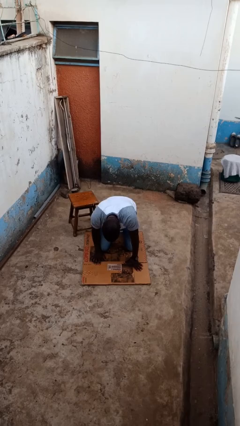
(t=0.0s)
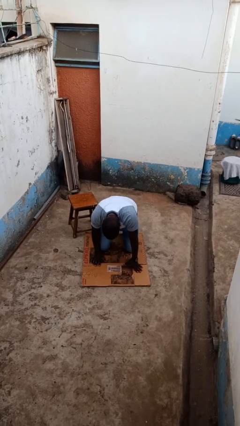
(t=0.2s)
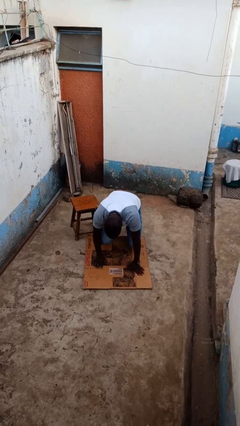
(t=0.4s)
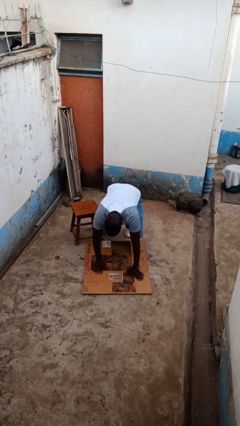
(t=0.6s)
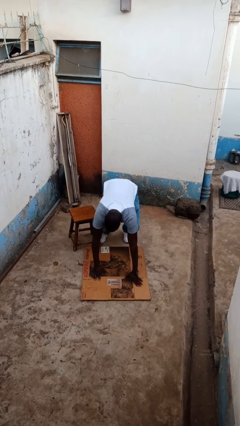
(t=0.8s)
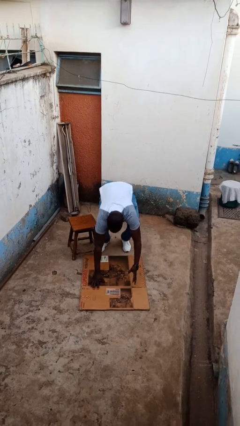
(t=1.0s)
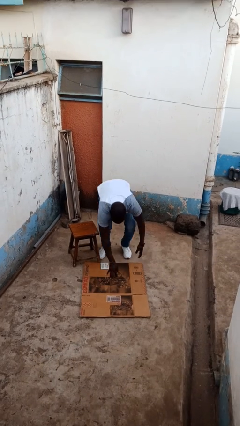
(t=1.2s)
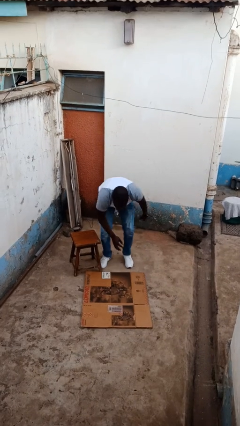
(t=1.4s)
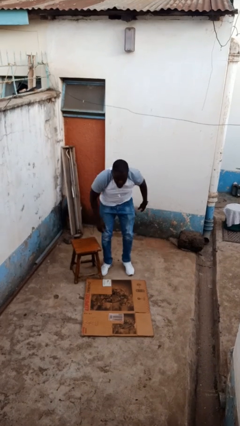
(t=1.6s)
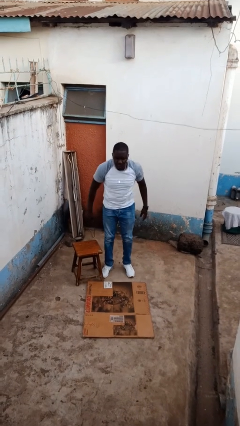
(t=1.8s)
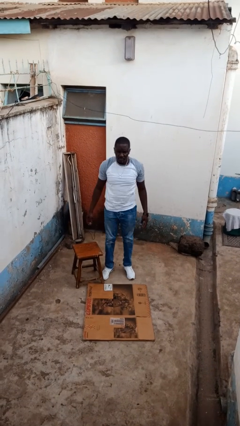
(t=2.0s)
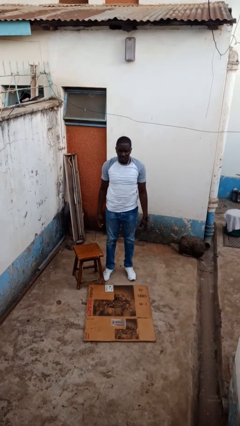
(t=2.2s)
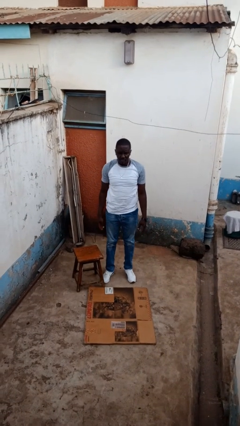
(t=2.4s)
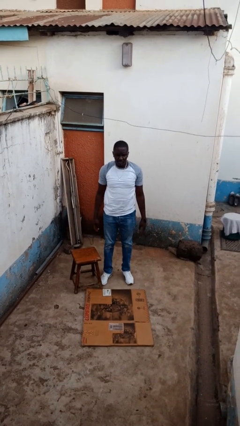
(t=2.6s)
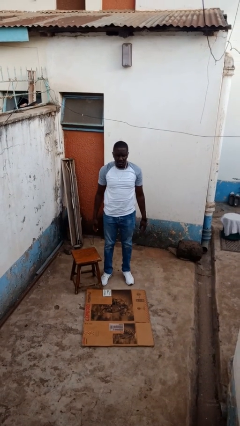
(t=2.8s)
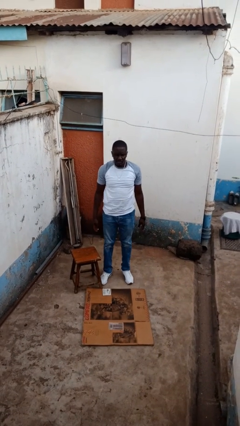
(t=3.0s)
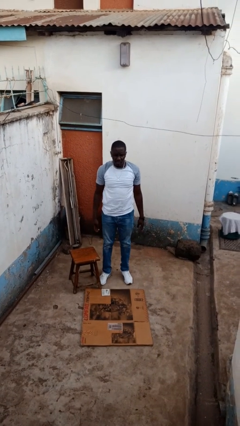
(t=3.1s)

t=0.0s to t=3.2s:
person stands up from floor

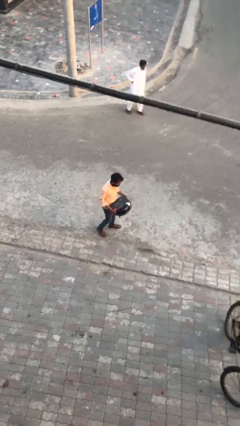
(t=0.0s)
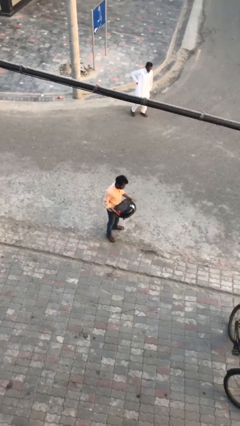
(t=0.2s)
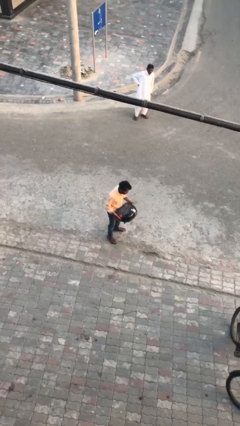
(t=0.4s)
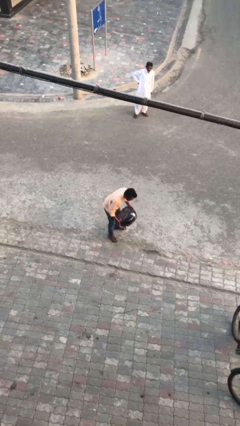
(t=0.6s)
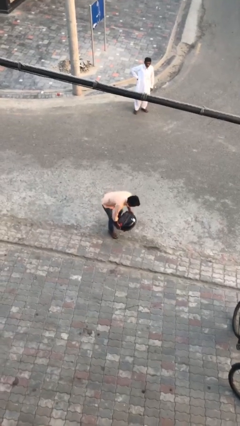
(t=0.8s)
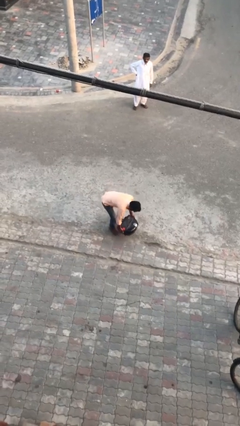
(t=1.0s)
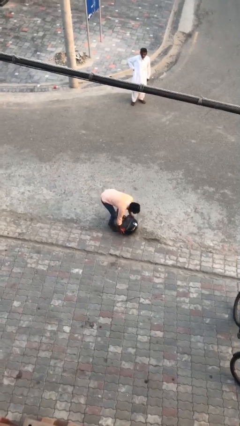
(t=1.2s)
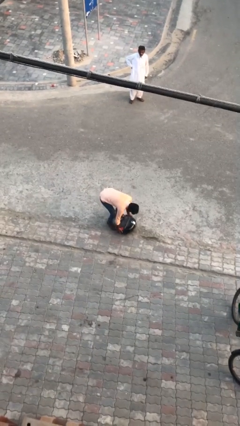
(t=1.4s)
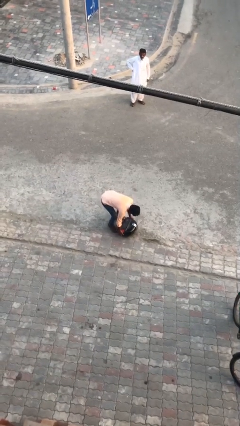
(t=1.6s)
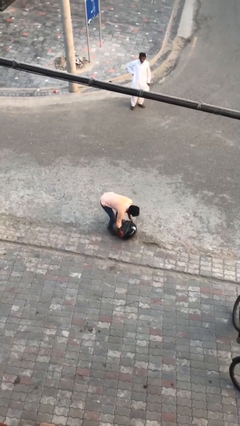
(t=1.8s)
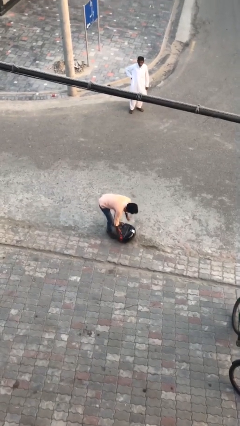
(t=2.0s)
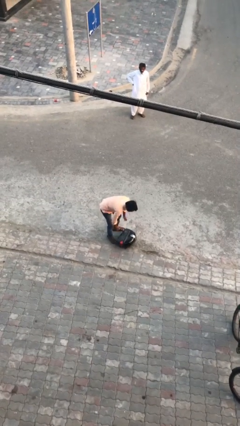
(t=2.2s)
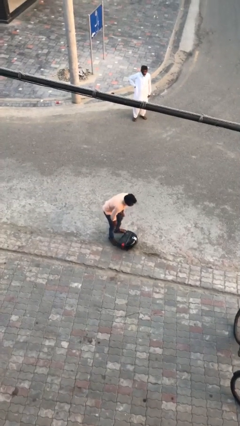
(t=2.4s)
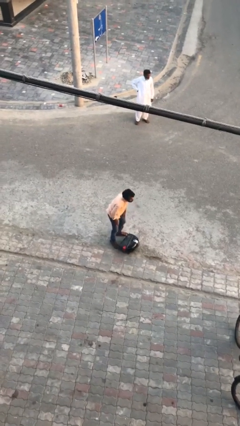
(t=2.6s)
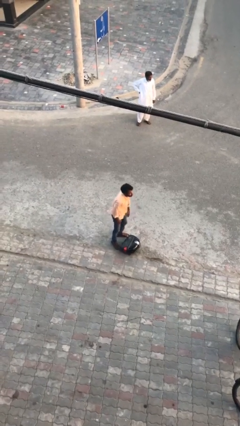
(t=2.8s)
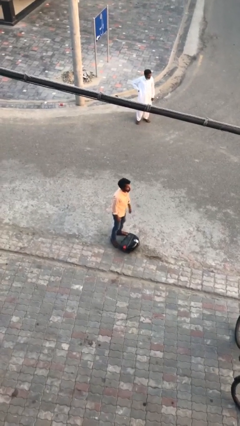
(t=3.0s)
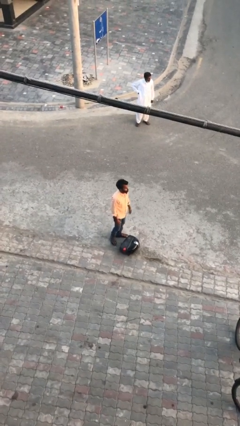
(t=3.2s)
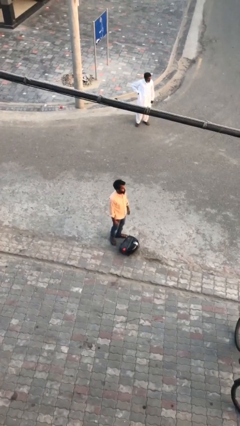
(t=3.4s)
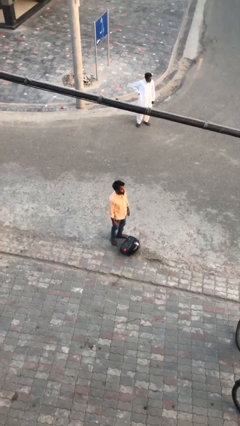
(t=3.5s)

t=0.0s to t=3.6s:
person puts down object on floor

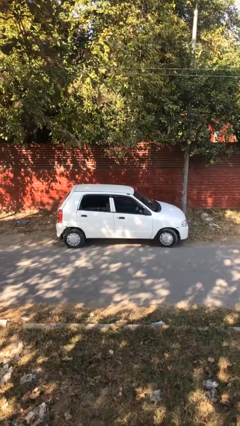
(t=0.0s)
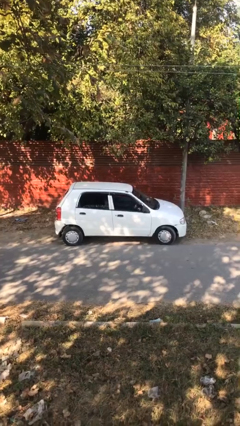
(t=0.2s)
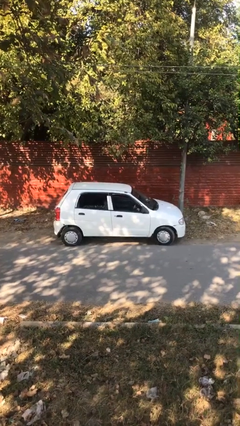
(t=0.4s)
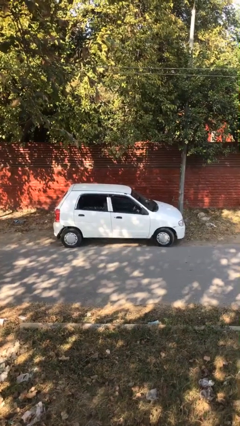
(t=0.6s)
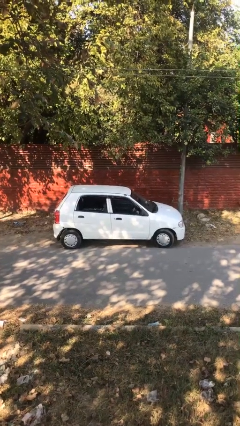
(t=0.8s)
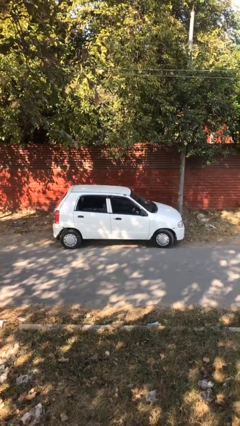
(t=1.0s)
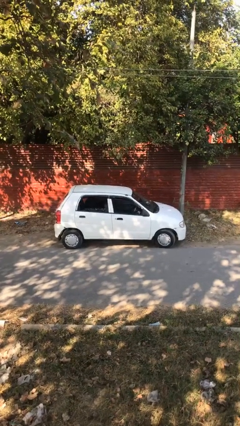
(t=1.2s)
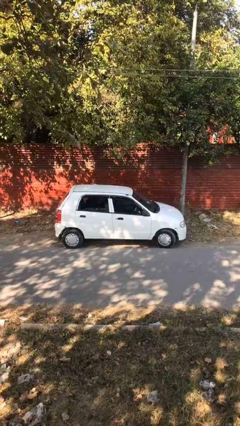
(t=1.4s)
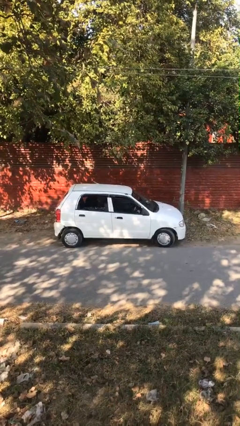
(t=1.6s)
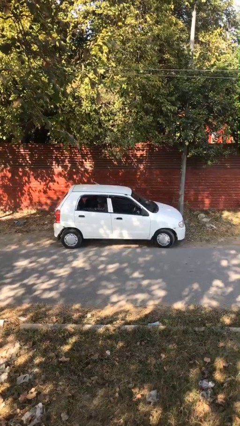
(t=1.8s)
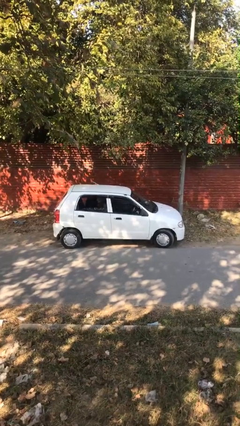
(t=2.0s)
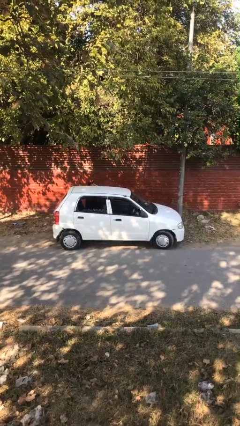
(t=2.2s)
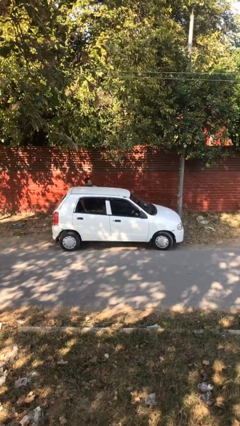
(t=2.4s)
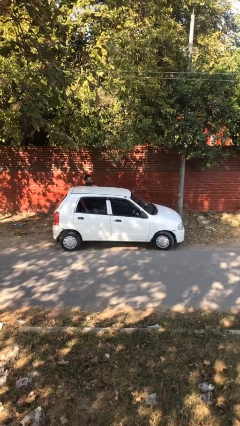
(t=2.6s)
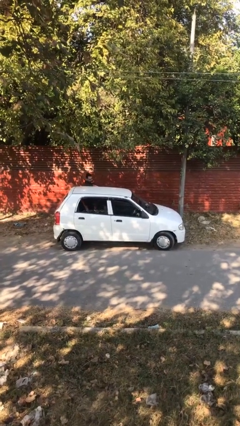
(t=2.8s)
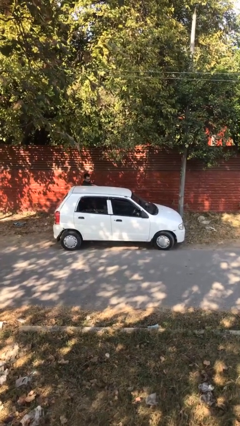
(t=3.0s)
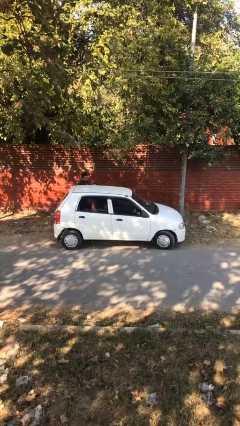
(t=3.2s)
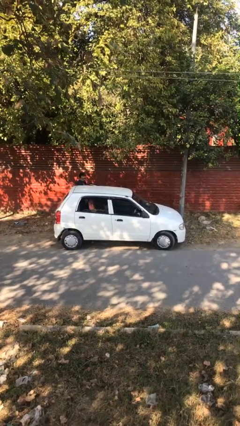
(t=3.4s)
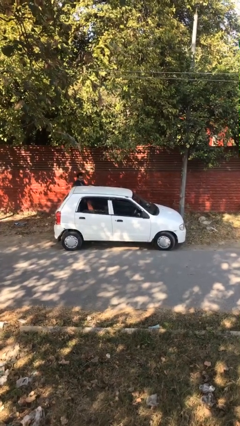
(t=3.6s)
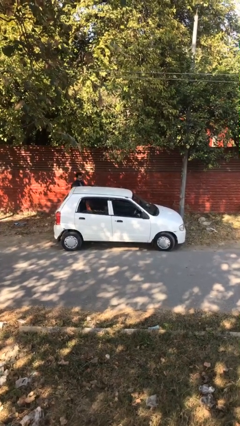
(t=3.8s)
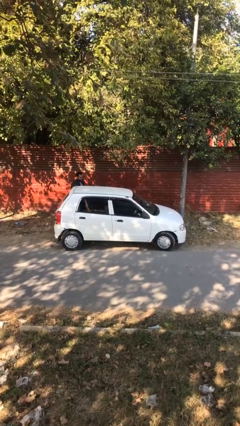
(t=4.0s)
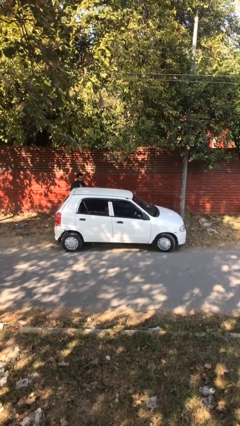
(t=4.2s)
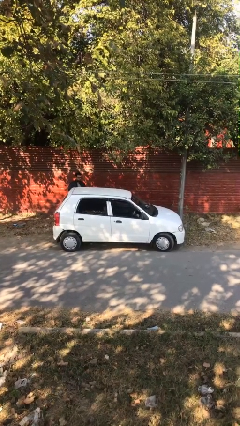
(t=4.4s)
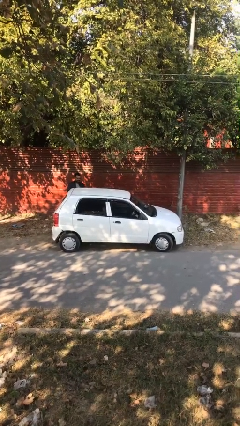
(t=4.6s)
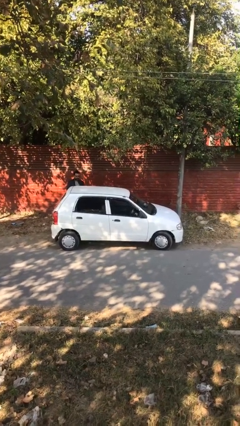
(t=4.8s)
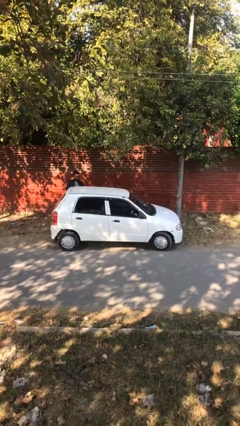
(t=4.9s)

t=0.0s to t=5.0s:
car drops off person

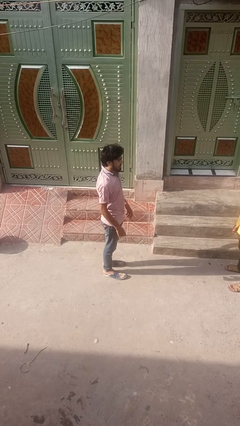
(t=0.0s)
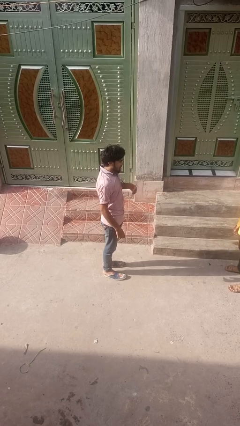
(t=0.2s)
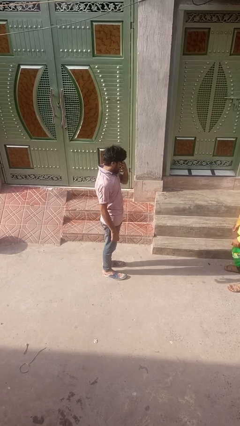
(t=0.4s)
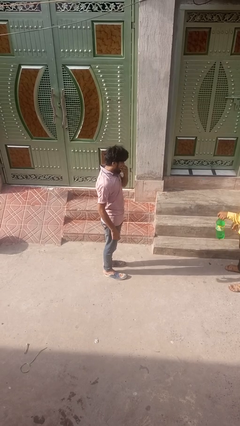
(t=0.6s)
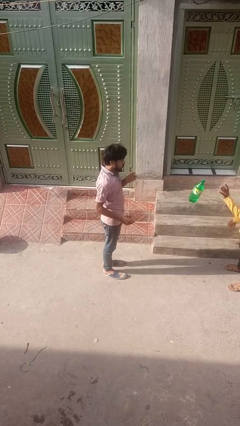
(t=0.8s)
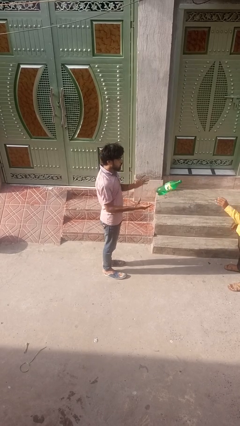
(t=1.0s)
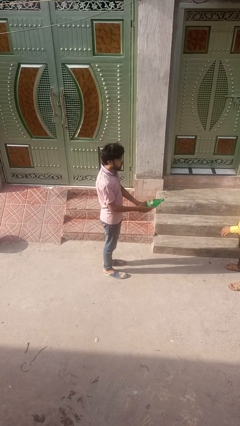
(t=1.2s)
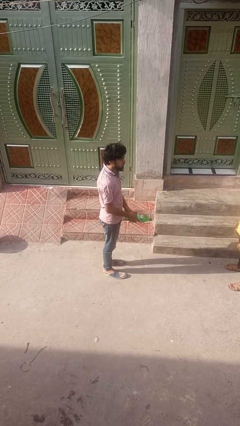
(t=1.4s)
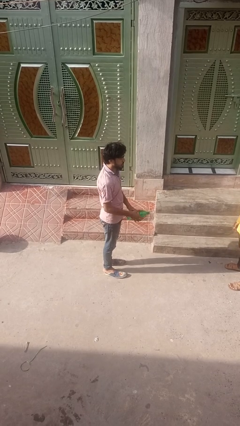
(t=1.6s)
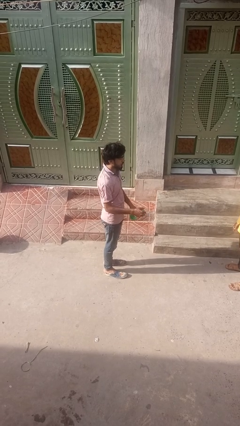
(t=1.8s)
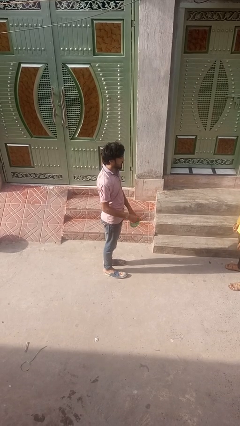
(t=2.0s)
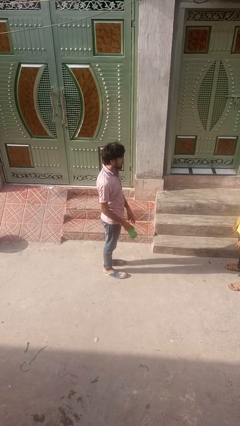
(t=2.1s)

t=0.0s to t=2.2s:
person catches object from person

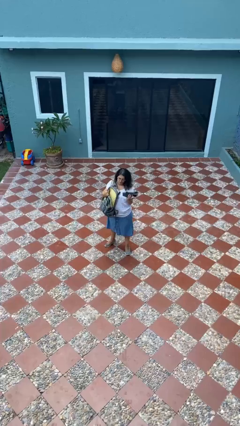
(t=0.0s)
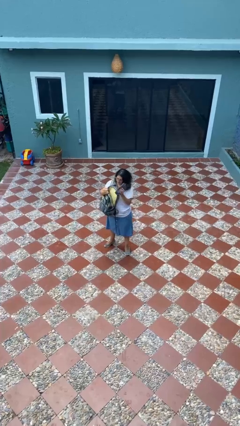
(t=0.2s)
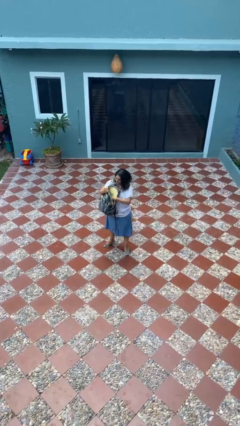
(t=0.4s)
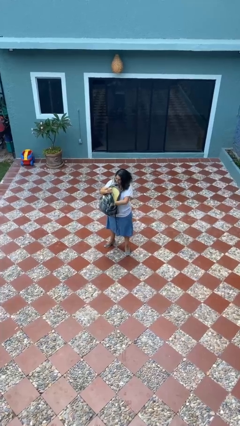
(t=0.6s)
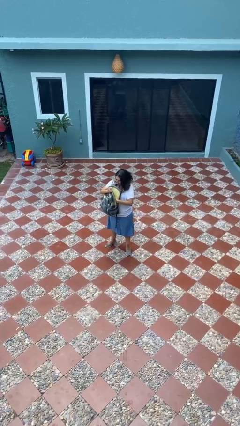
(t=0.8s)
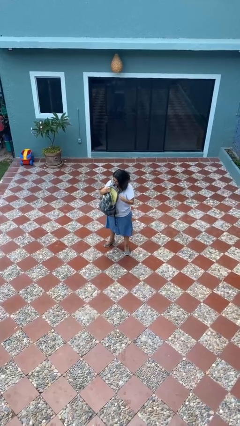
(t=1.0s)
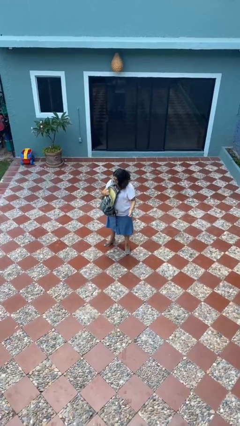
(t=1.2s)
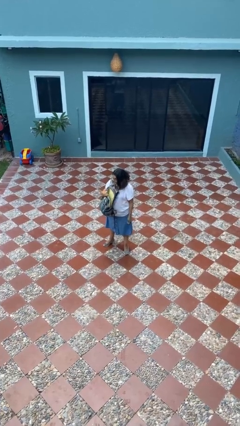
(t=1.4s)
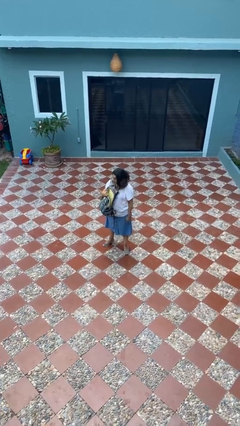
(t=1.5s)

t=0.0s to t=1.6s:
person puts object into backpack

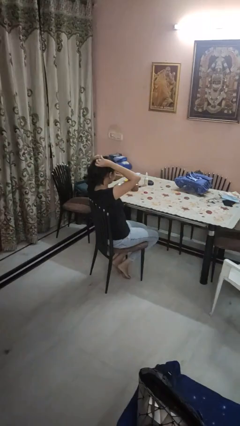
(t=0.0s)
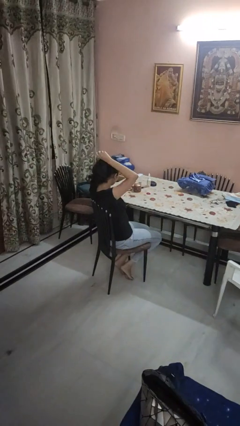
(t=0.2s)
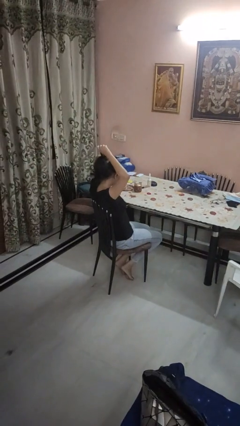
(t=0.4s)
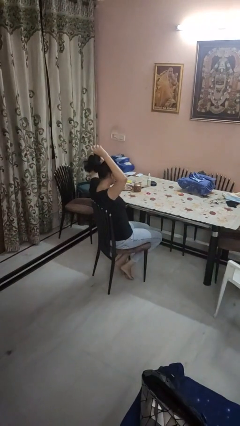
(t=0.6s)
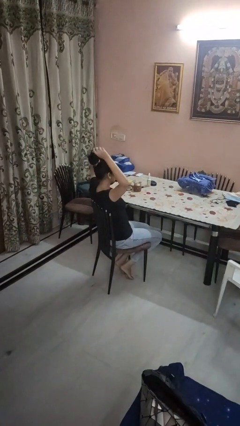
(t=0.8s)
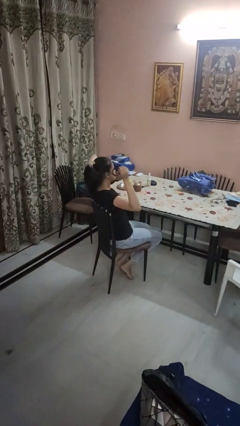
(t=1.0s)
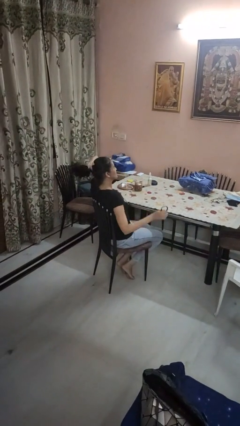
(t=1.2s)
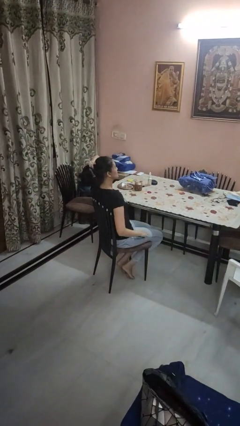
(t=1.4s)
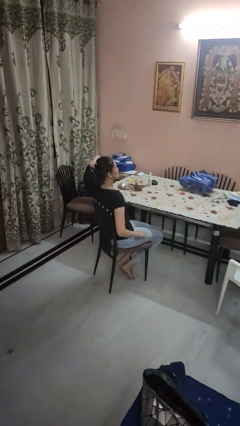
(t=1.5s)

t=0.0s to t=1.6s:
person takes off hairtie

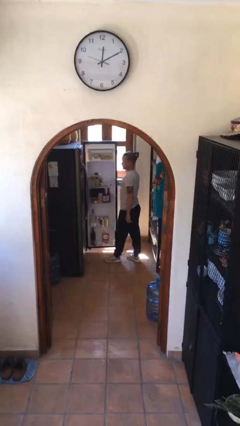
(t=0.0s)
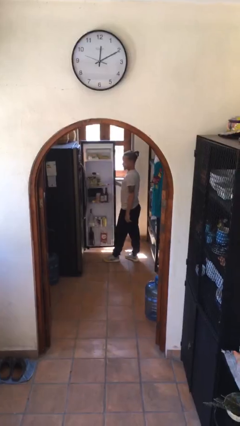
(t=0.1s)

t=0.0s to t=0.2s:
person closes refrigerator
